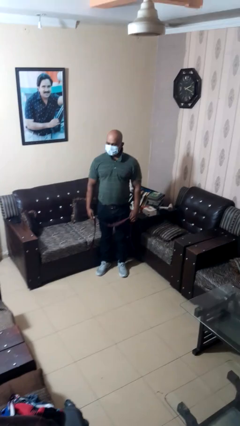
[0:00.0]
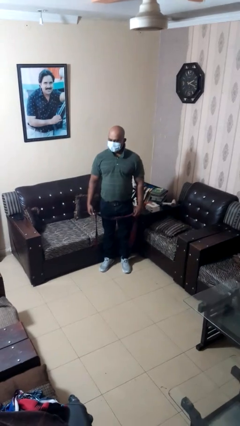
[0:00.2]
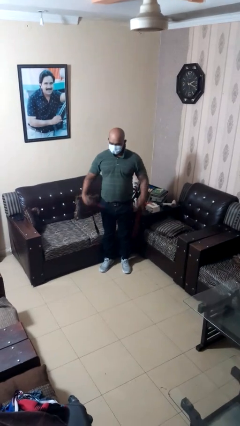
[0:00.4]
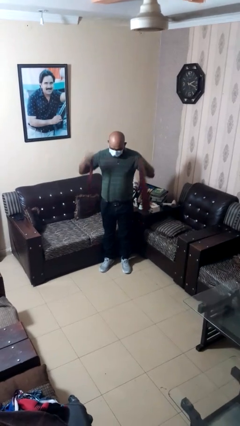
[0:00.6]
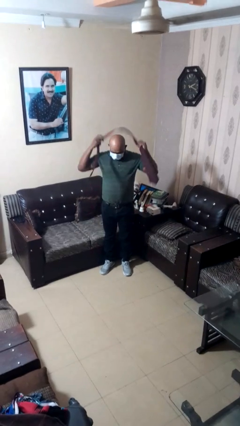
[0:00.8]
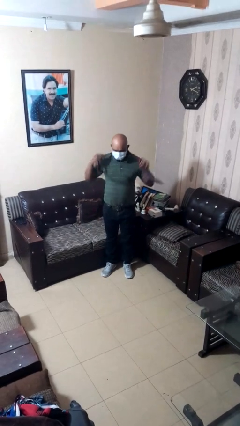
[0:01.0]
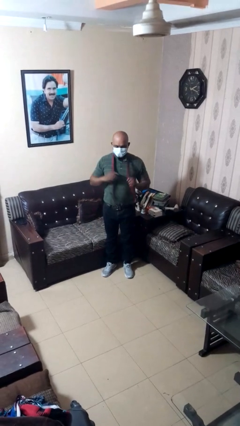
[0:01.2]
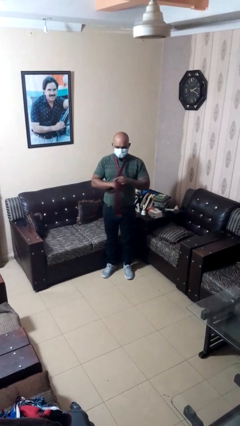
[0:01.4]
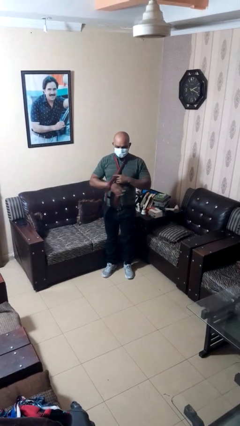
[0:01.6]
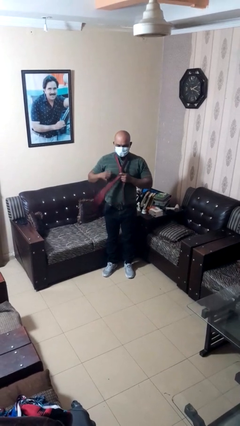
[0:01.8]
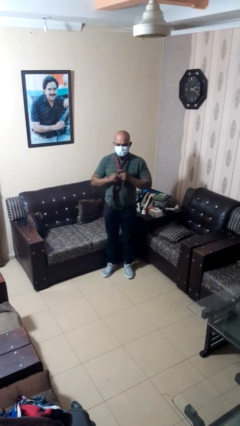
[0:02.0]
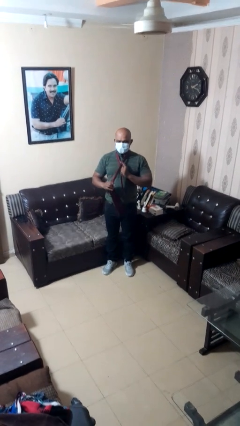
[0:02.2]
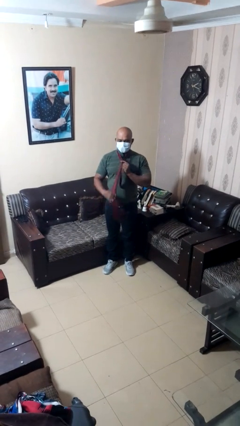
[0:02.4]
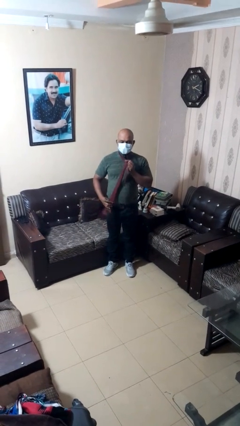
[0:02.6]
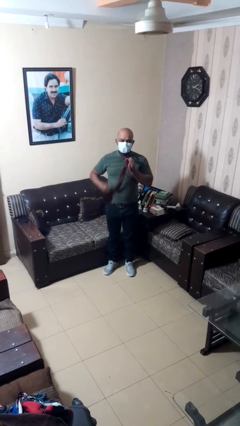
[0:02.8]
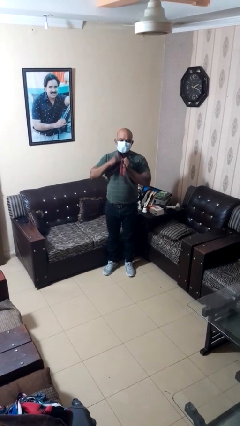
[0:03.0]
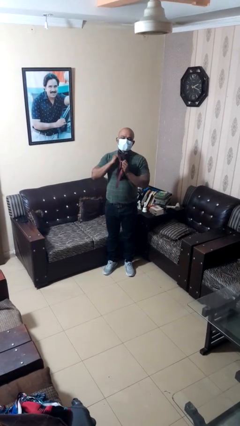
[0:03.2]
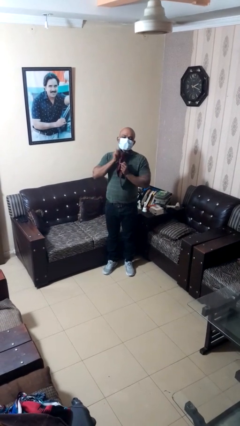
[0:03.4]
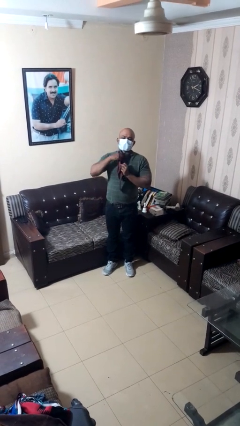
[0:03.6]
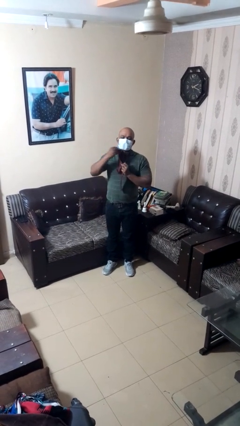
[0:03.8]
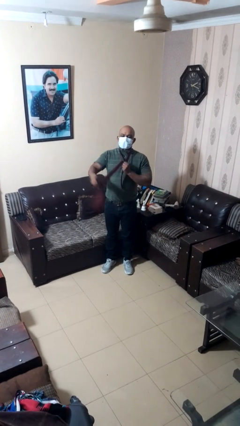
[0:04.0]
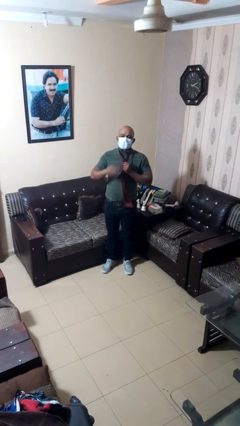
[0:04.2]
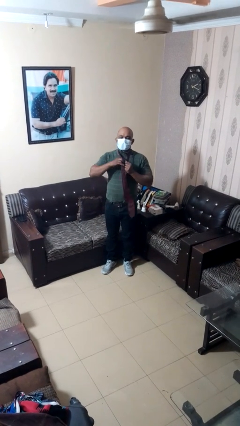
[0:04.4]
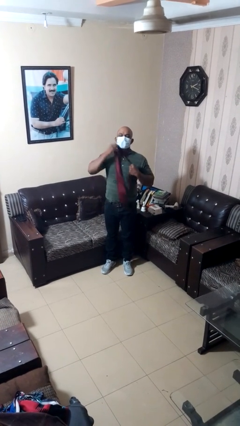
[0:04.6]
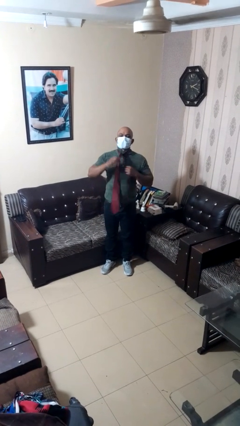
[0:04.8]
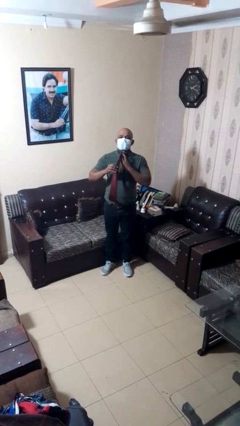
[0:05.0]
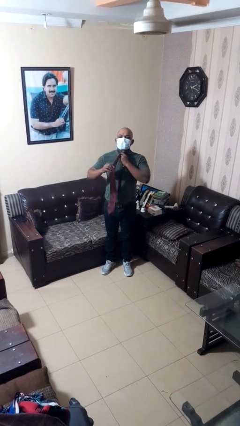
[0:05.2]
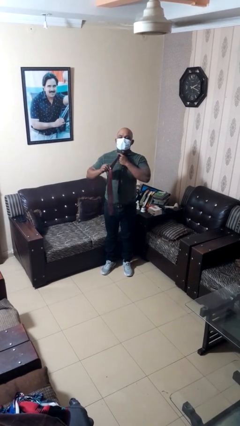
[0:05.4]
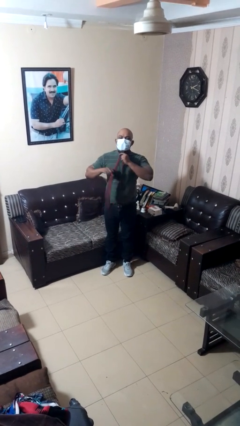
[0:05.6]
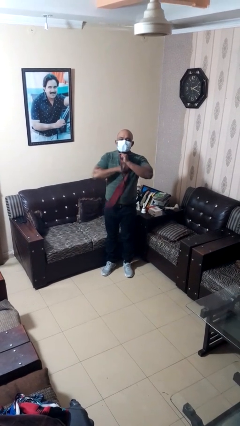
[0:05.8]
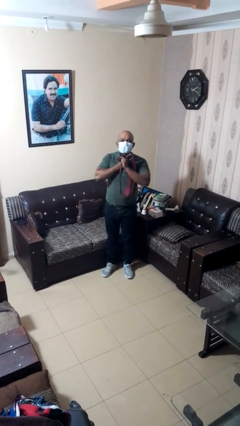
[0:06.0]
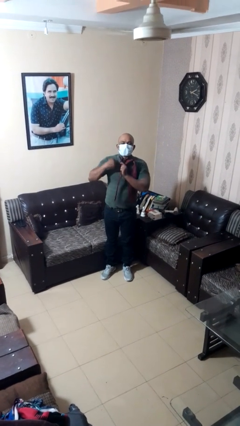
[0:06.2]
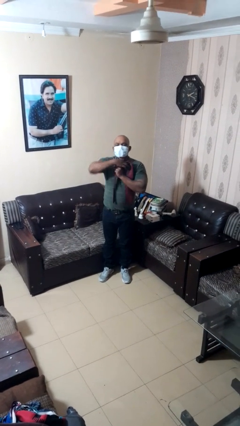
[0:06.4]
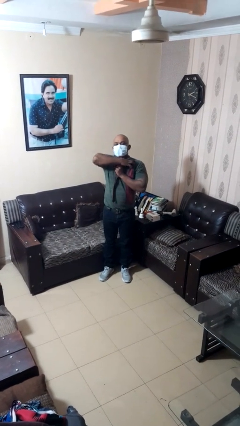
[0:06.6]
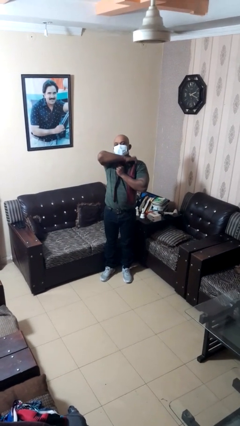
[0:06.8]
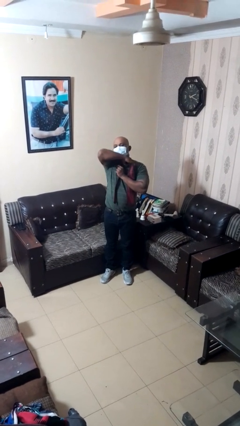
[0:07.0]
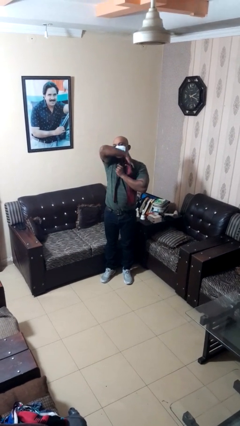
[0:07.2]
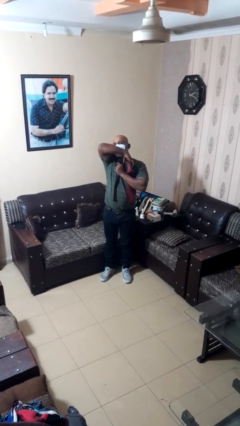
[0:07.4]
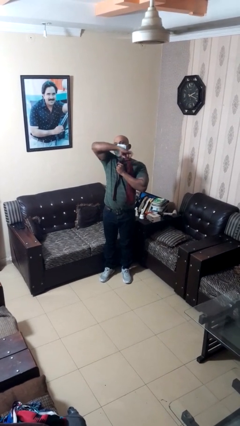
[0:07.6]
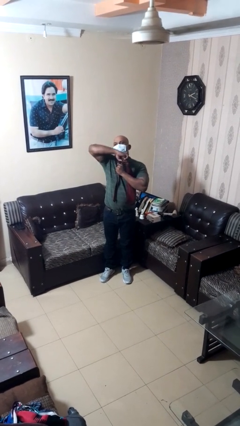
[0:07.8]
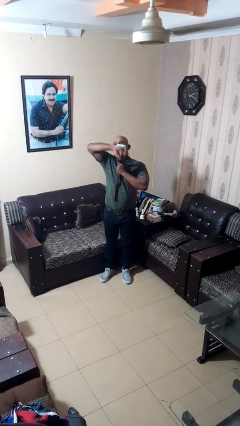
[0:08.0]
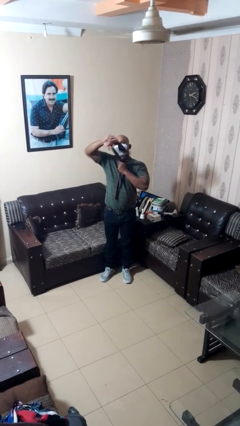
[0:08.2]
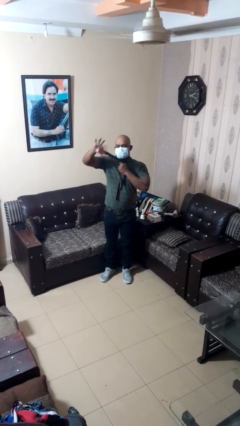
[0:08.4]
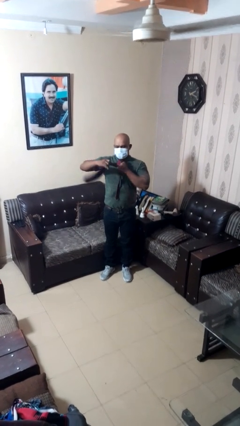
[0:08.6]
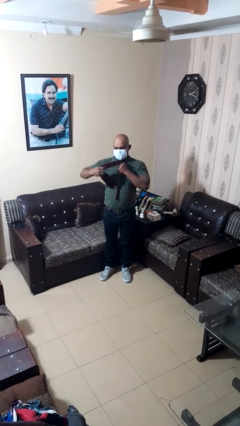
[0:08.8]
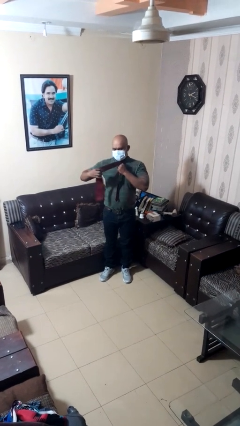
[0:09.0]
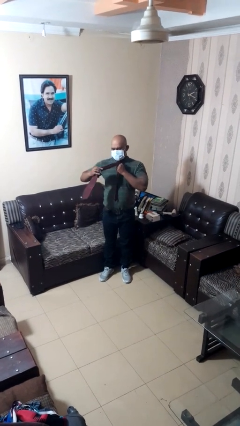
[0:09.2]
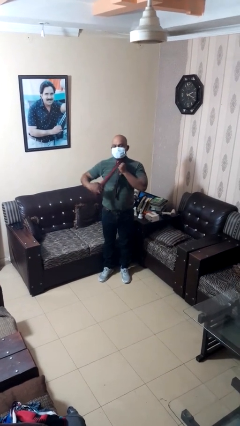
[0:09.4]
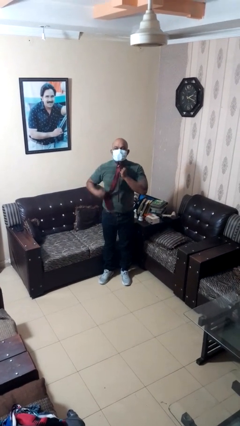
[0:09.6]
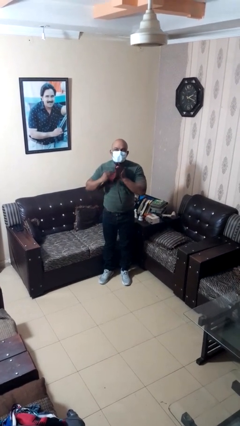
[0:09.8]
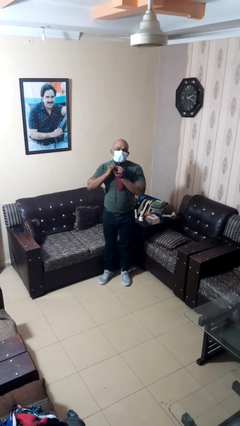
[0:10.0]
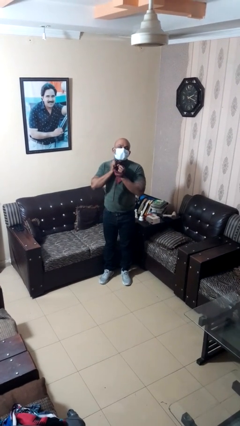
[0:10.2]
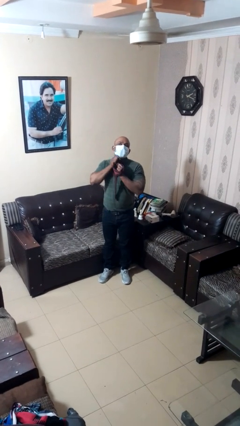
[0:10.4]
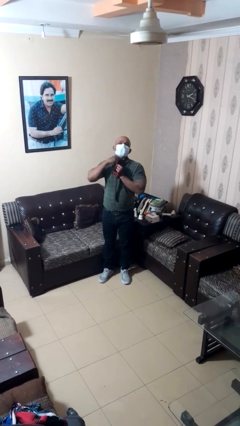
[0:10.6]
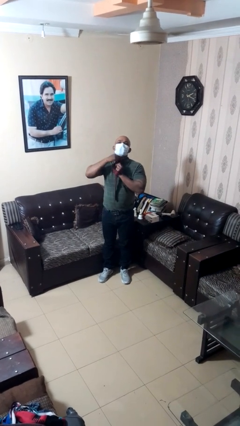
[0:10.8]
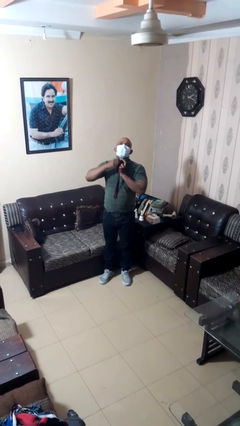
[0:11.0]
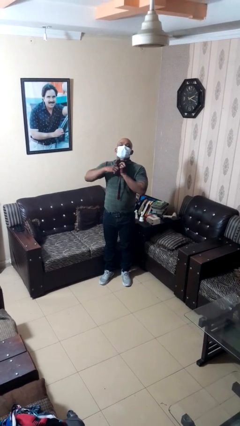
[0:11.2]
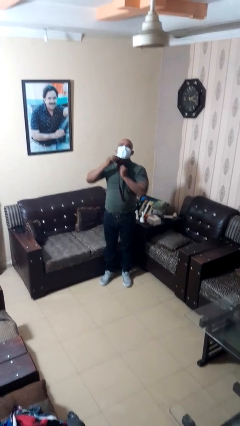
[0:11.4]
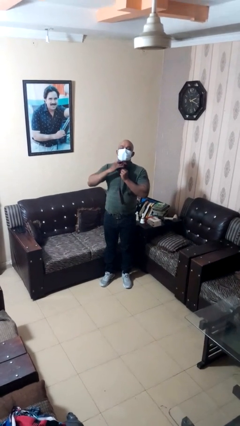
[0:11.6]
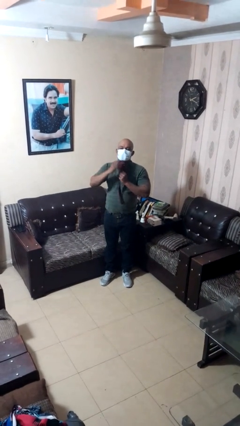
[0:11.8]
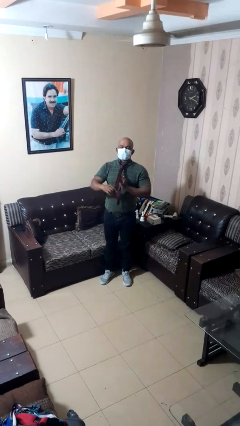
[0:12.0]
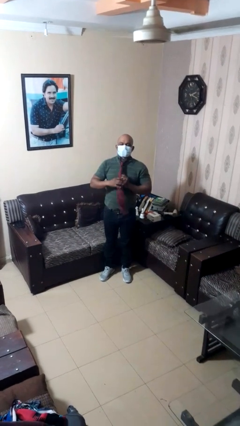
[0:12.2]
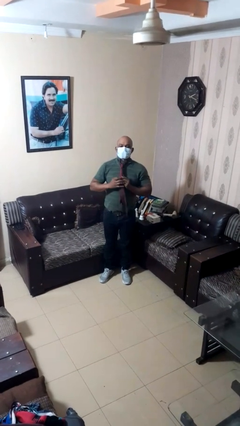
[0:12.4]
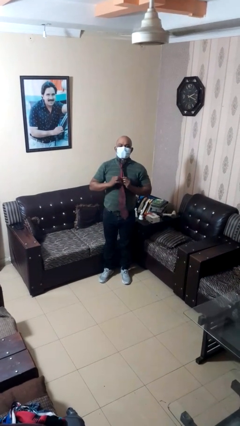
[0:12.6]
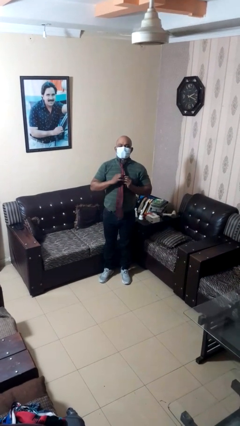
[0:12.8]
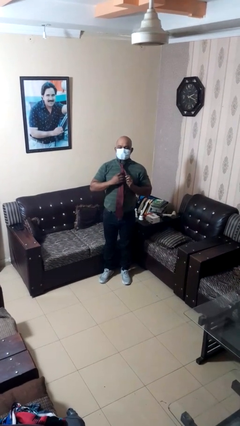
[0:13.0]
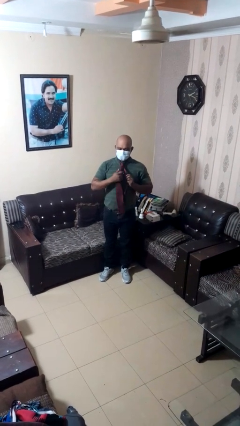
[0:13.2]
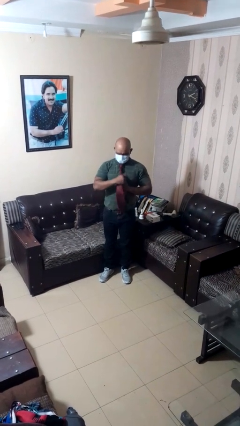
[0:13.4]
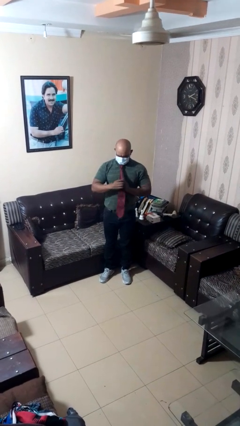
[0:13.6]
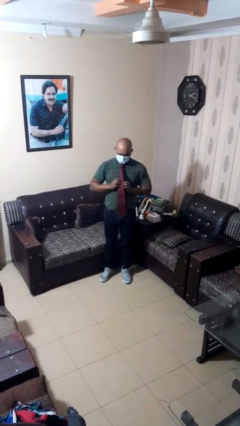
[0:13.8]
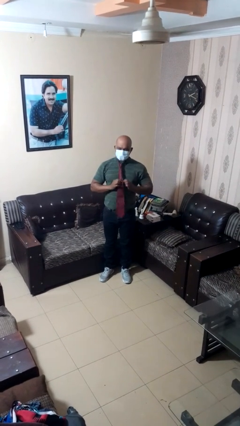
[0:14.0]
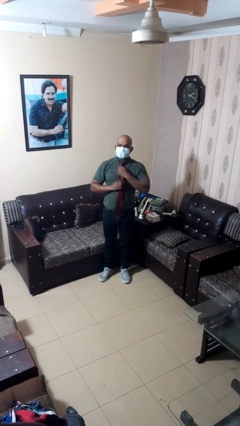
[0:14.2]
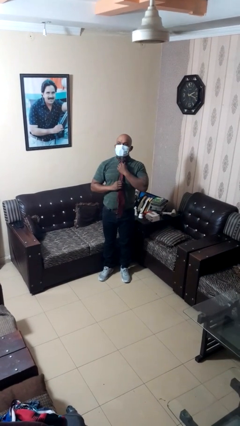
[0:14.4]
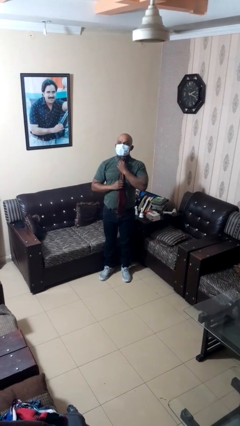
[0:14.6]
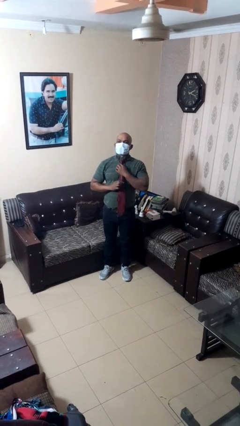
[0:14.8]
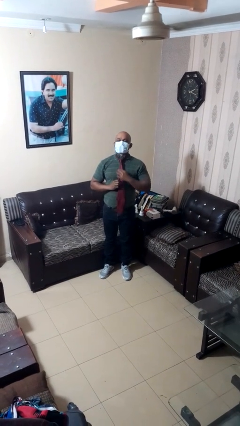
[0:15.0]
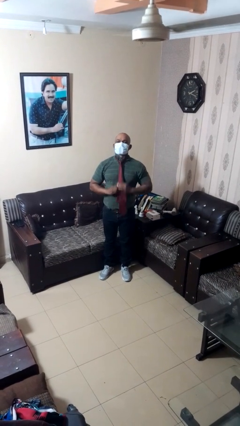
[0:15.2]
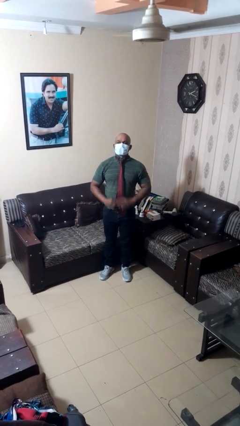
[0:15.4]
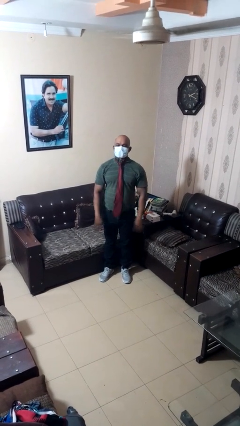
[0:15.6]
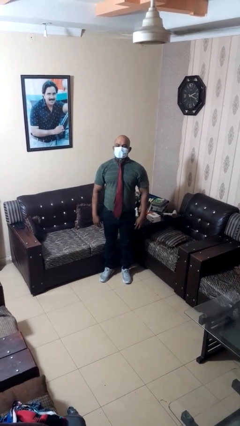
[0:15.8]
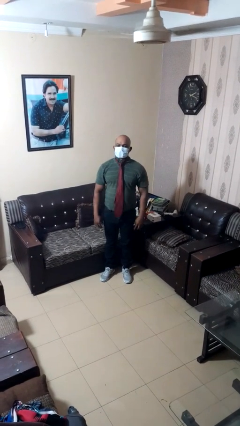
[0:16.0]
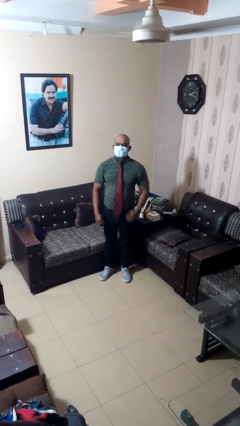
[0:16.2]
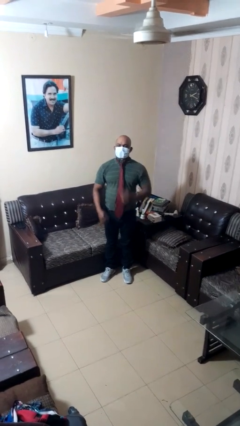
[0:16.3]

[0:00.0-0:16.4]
person puts on necktie

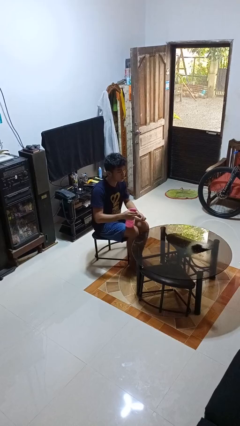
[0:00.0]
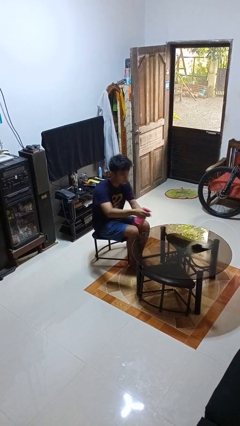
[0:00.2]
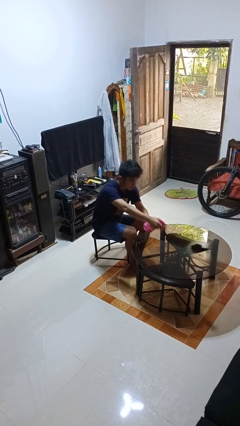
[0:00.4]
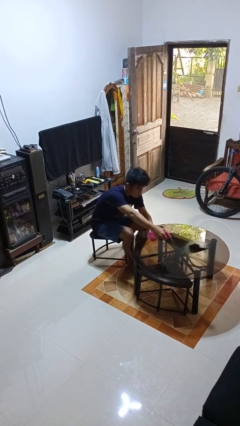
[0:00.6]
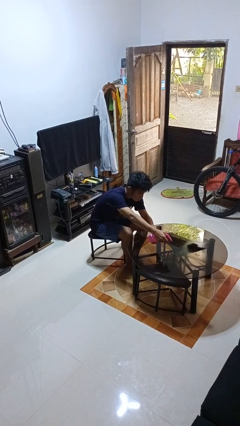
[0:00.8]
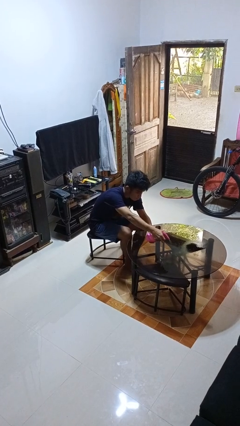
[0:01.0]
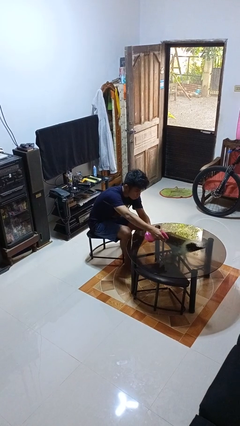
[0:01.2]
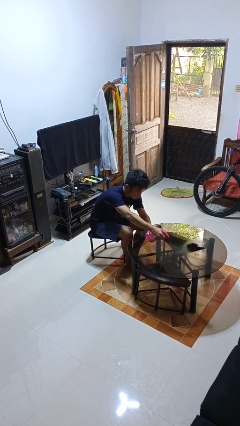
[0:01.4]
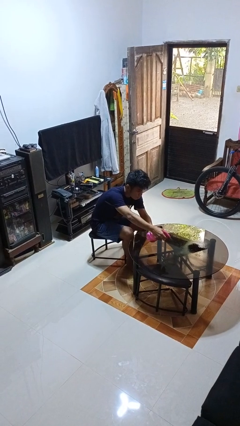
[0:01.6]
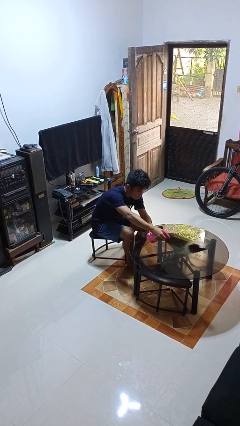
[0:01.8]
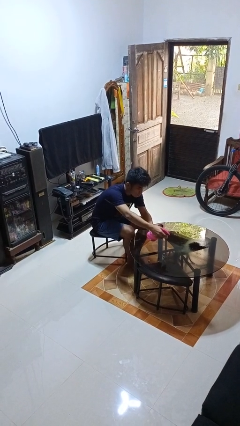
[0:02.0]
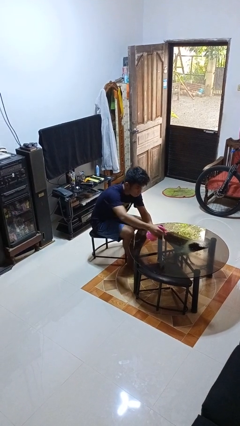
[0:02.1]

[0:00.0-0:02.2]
person sprays from bottle
